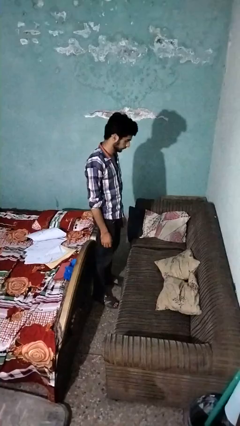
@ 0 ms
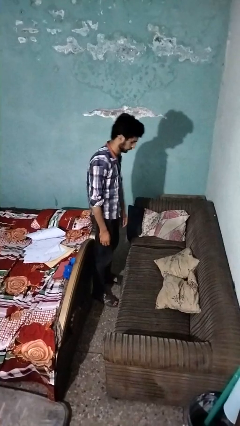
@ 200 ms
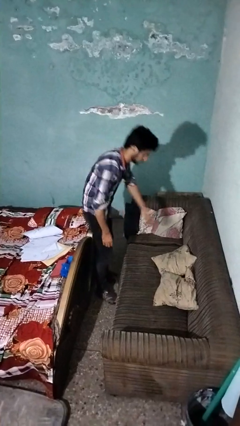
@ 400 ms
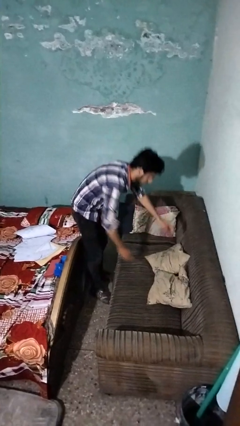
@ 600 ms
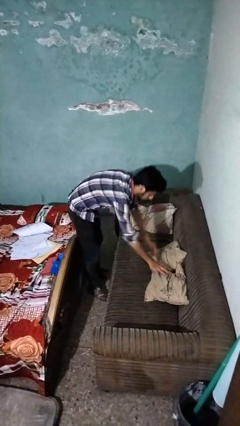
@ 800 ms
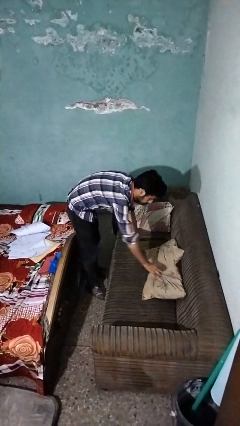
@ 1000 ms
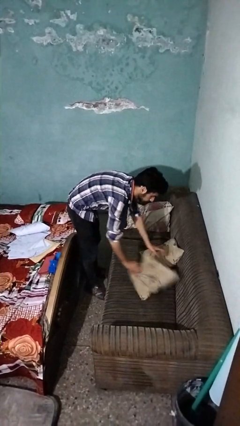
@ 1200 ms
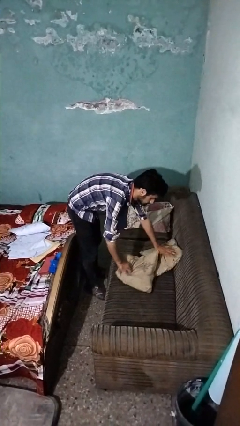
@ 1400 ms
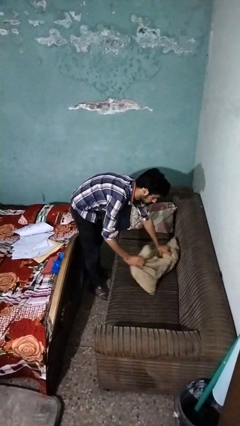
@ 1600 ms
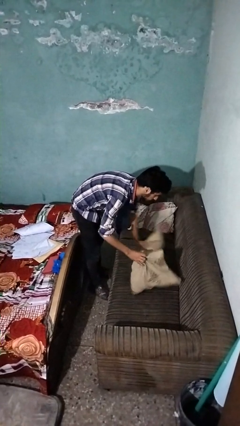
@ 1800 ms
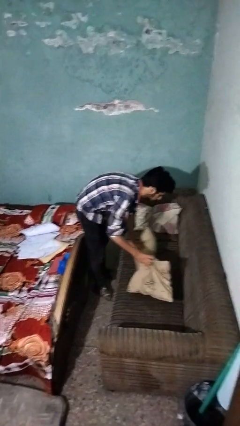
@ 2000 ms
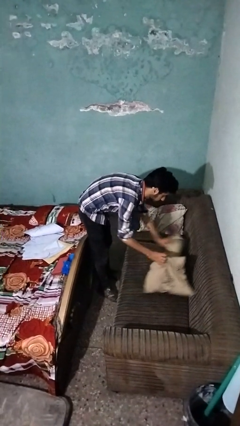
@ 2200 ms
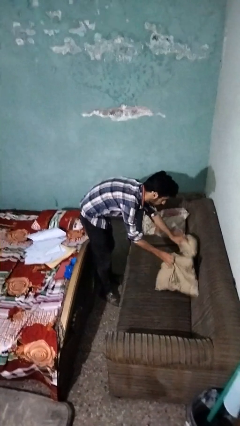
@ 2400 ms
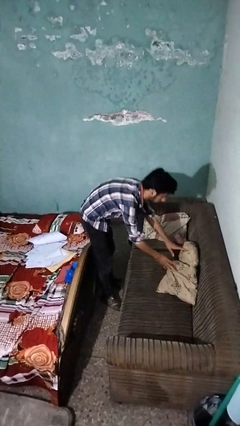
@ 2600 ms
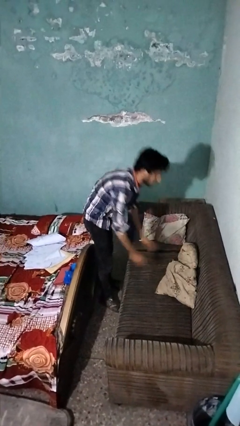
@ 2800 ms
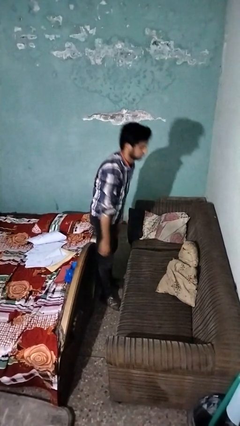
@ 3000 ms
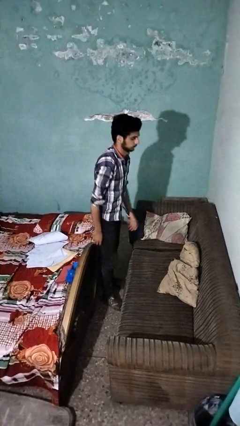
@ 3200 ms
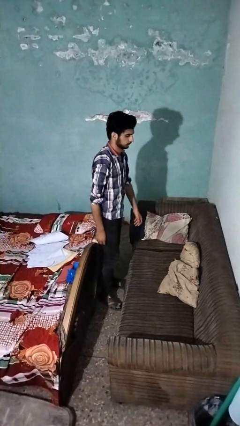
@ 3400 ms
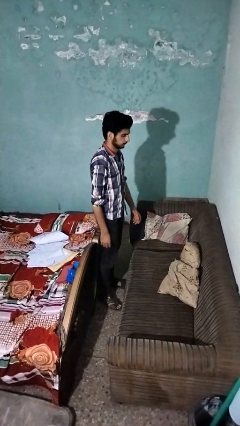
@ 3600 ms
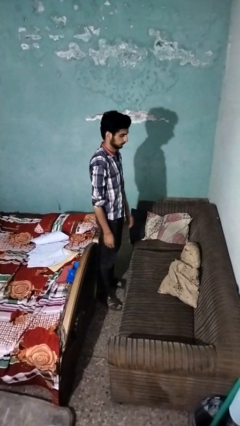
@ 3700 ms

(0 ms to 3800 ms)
person searches in couch

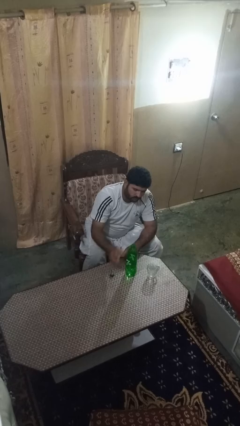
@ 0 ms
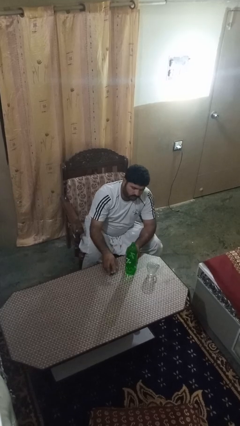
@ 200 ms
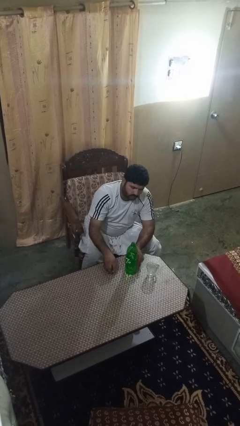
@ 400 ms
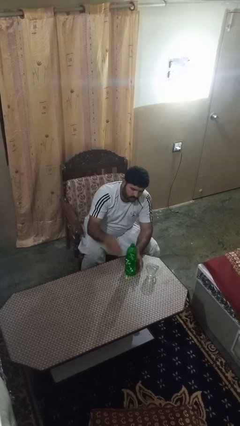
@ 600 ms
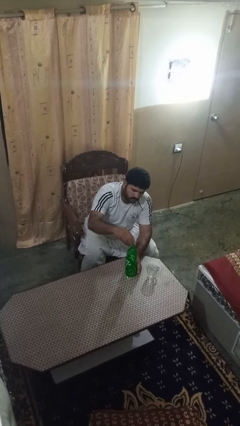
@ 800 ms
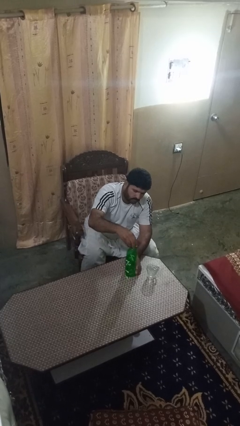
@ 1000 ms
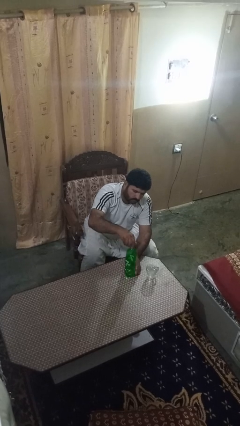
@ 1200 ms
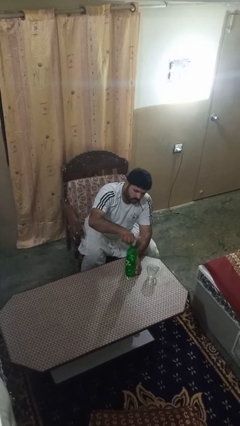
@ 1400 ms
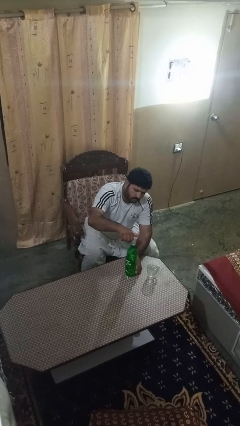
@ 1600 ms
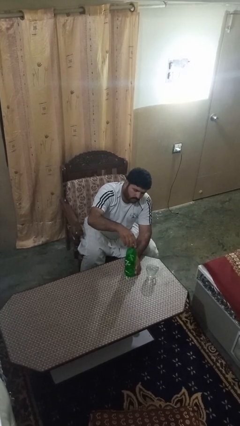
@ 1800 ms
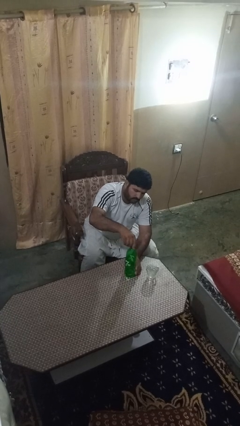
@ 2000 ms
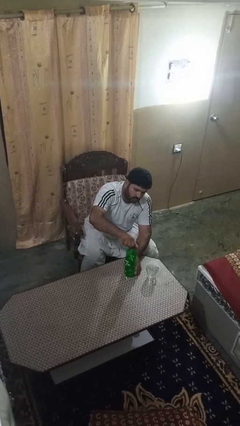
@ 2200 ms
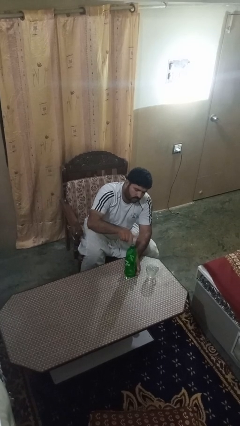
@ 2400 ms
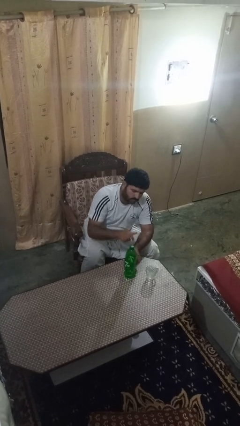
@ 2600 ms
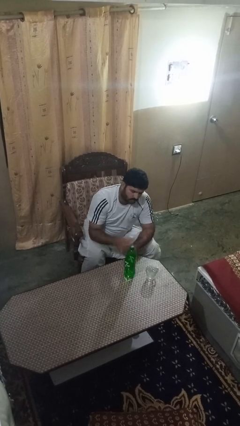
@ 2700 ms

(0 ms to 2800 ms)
person screws lid to bottle

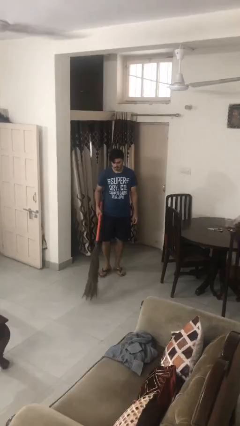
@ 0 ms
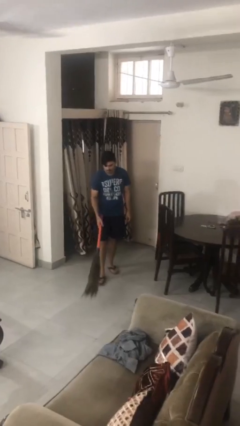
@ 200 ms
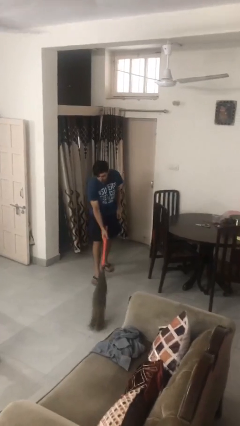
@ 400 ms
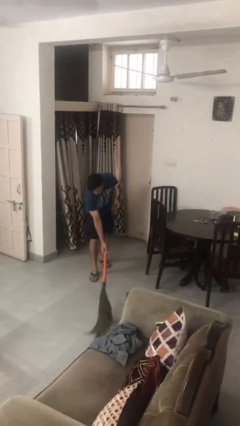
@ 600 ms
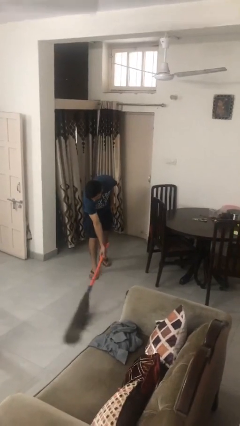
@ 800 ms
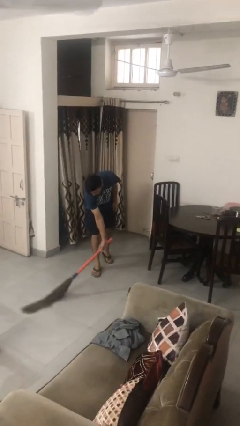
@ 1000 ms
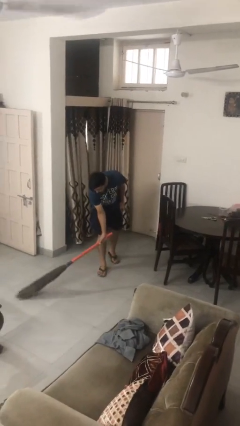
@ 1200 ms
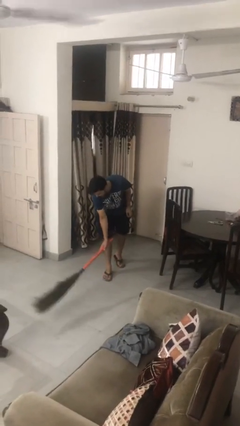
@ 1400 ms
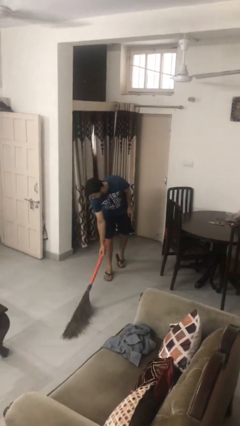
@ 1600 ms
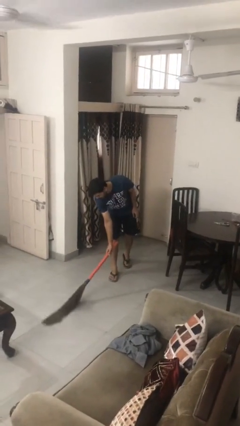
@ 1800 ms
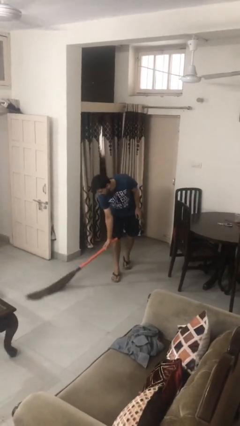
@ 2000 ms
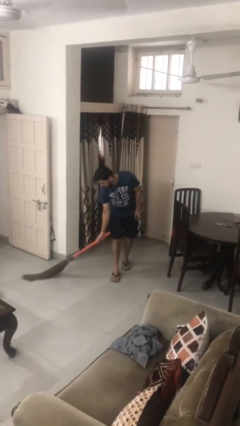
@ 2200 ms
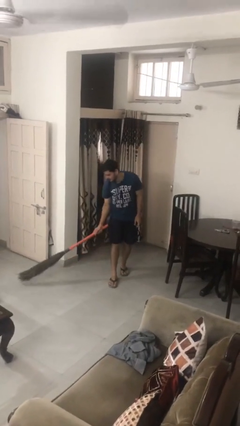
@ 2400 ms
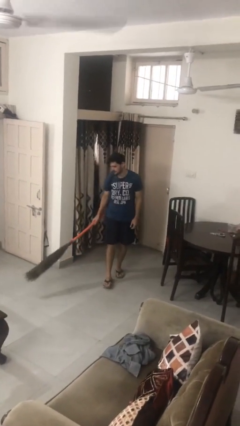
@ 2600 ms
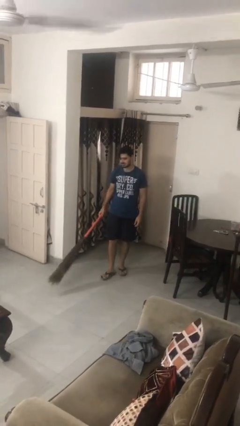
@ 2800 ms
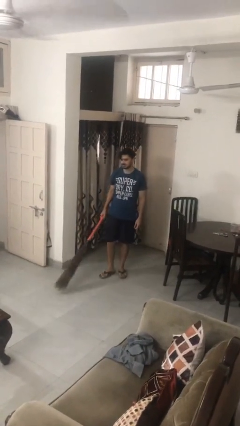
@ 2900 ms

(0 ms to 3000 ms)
person sweeps floor

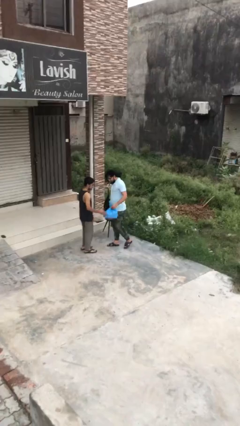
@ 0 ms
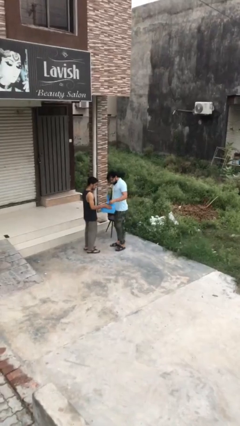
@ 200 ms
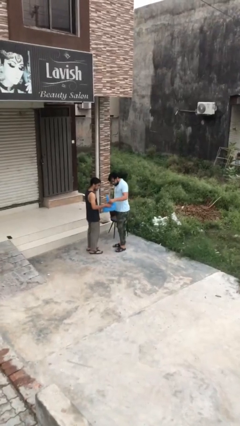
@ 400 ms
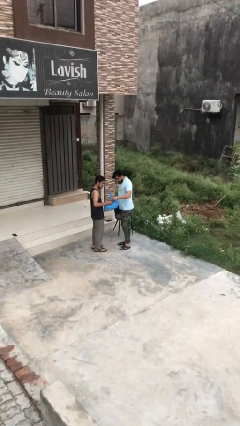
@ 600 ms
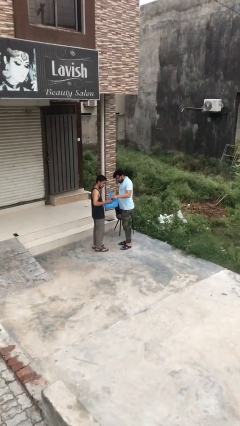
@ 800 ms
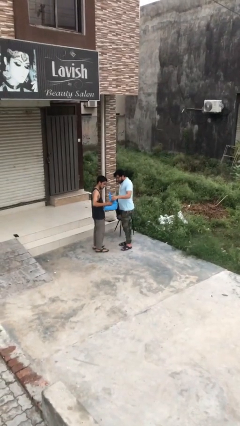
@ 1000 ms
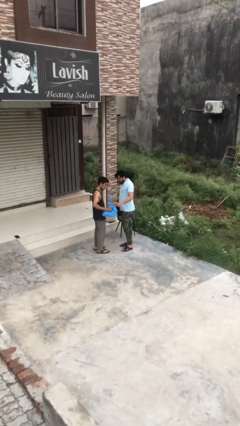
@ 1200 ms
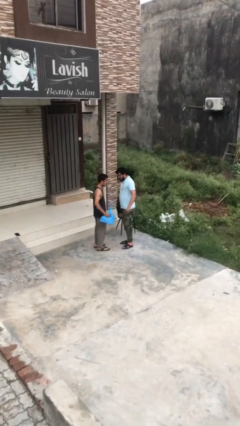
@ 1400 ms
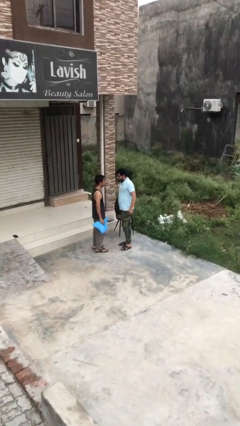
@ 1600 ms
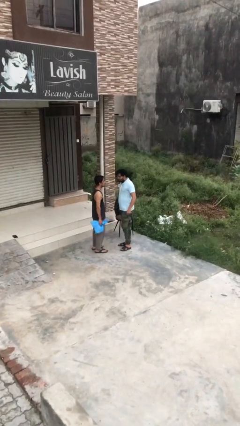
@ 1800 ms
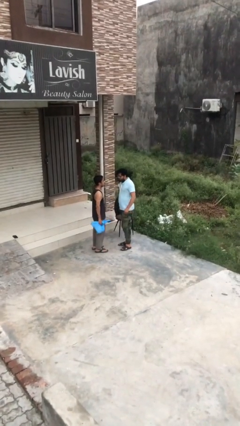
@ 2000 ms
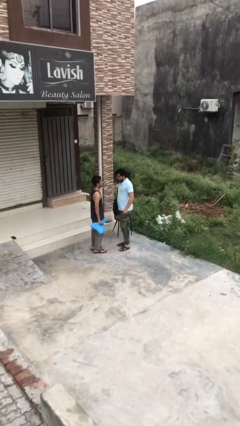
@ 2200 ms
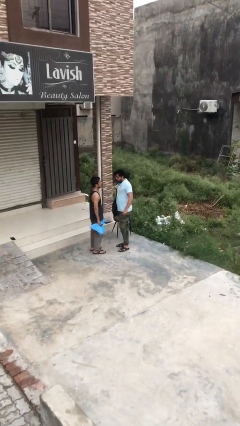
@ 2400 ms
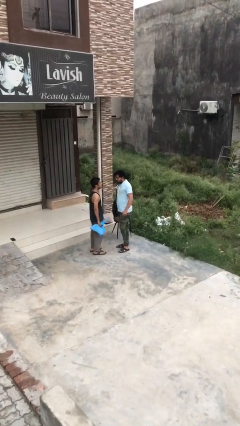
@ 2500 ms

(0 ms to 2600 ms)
person transfers object to person

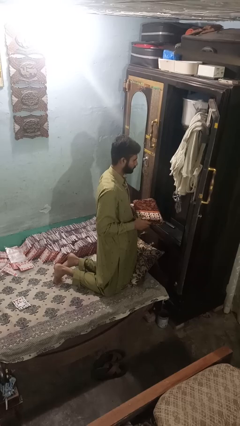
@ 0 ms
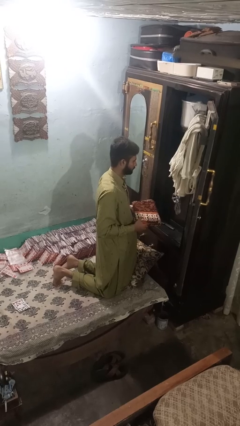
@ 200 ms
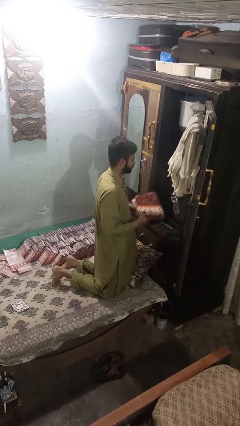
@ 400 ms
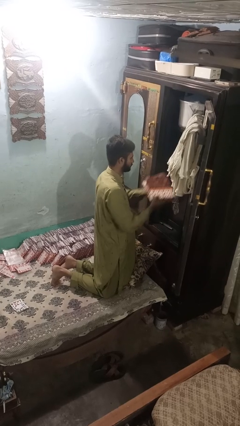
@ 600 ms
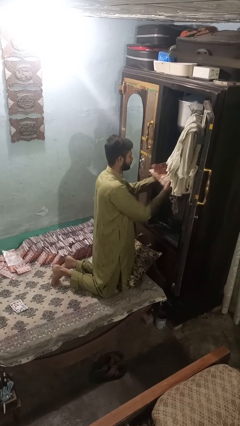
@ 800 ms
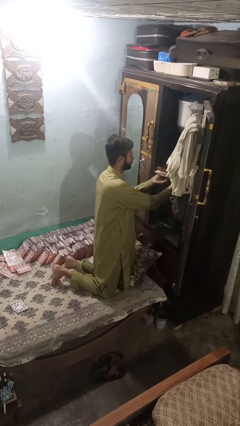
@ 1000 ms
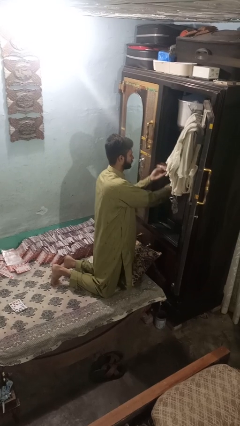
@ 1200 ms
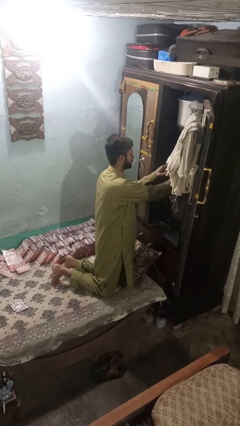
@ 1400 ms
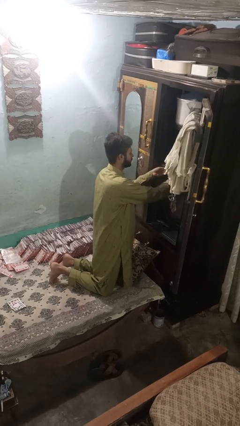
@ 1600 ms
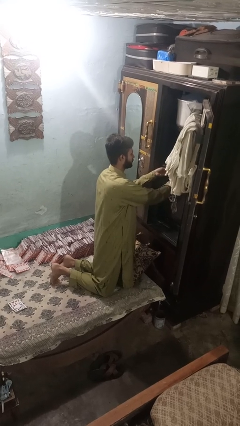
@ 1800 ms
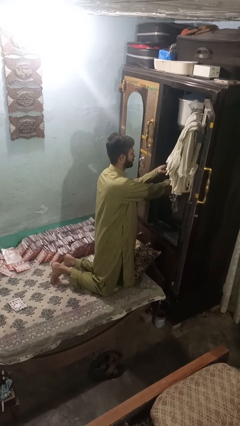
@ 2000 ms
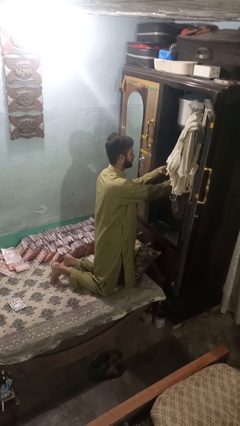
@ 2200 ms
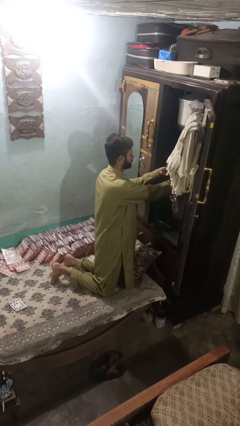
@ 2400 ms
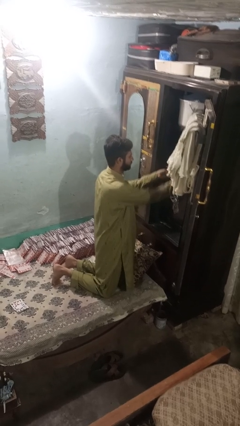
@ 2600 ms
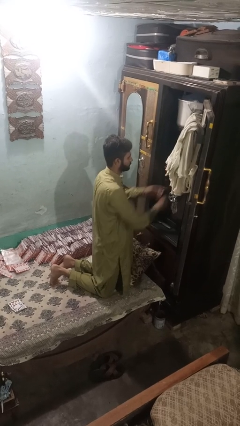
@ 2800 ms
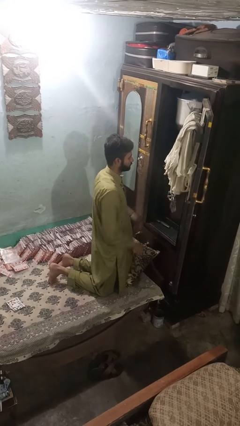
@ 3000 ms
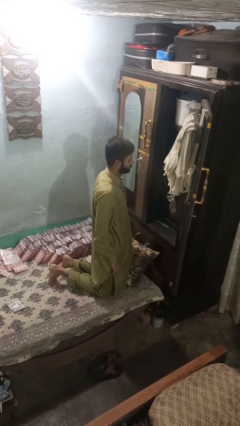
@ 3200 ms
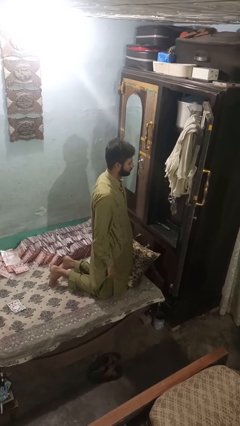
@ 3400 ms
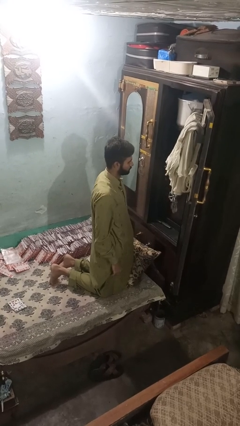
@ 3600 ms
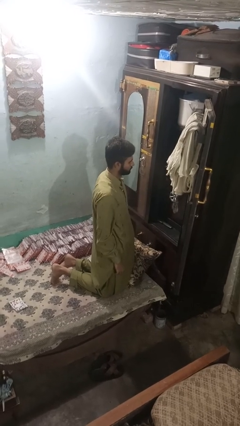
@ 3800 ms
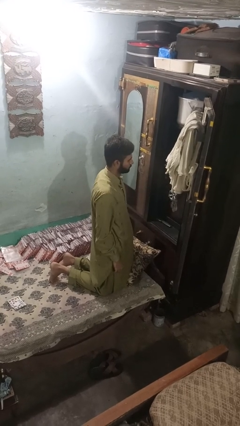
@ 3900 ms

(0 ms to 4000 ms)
person puts clothes into dresser

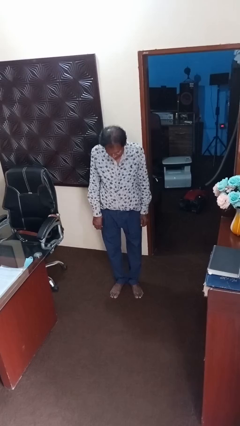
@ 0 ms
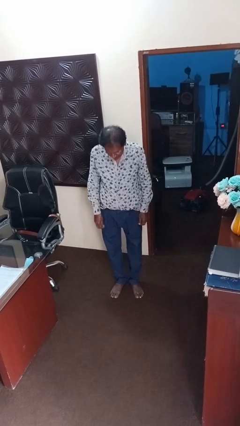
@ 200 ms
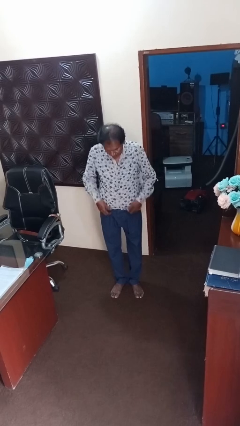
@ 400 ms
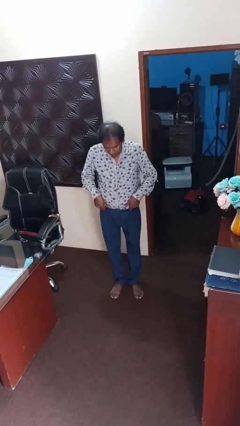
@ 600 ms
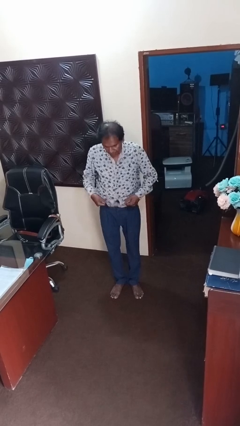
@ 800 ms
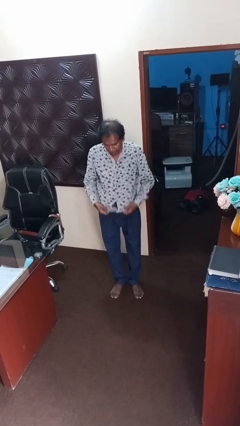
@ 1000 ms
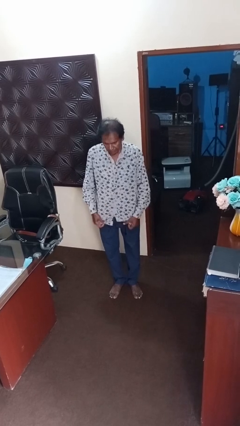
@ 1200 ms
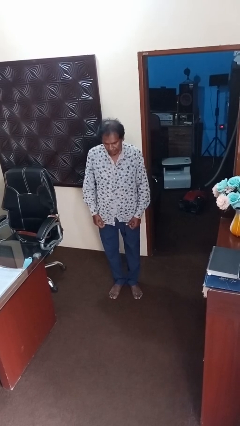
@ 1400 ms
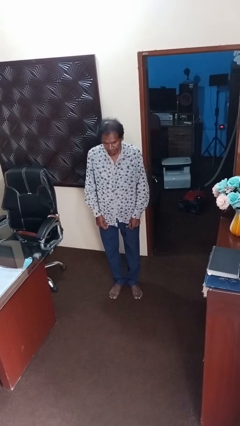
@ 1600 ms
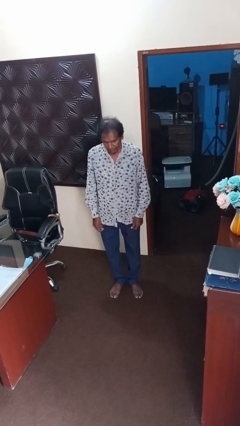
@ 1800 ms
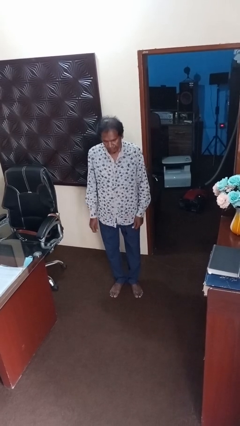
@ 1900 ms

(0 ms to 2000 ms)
person untucks shirt
